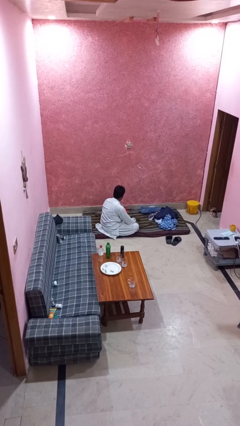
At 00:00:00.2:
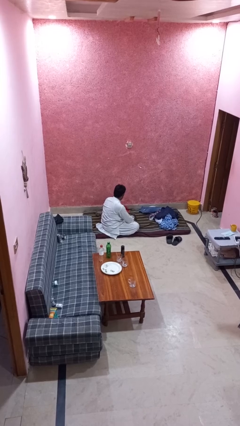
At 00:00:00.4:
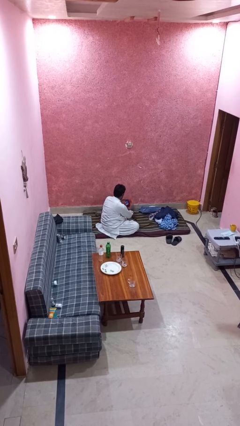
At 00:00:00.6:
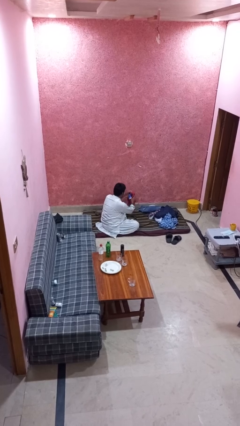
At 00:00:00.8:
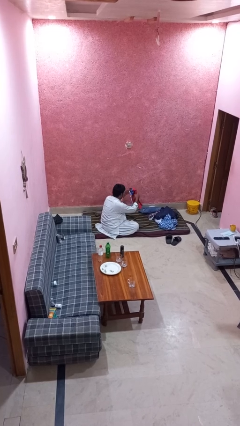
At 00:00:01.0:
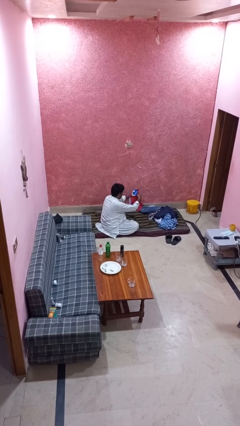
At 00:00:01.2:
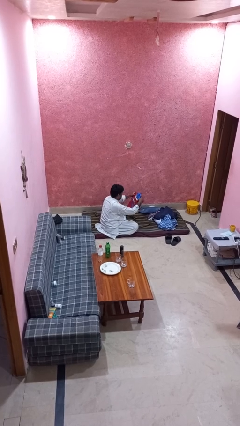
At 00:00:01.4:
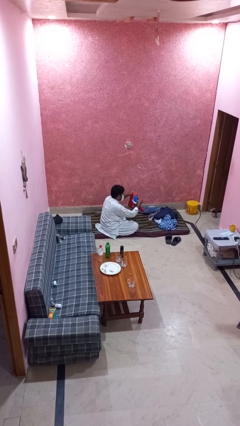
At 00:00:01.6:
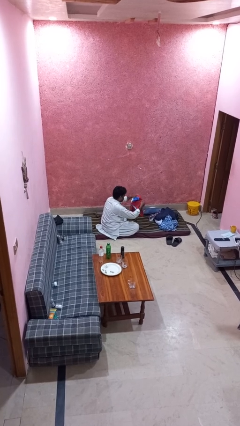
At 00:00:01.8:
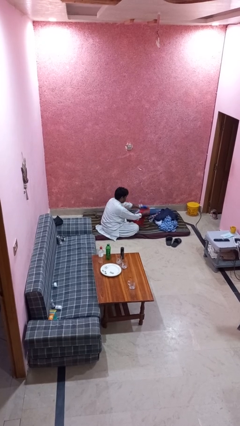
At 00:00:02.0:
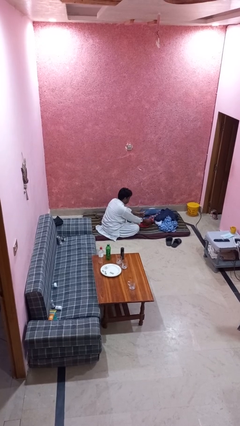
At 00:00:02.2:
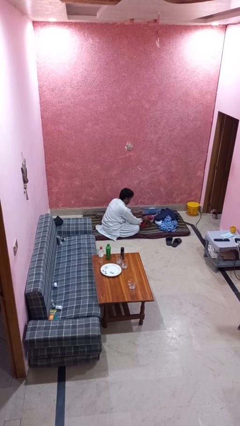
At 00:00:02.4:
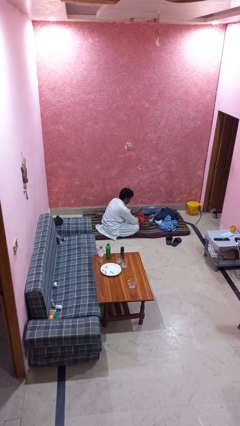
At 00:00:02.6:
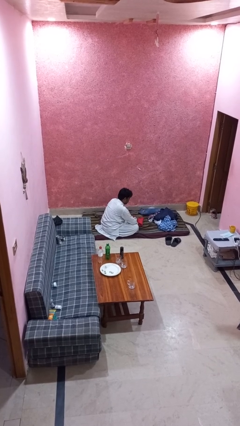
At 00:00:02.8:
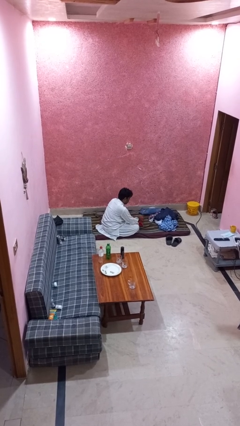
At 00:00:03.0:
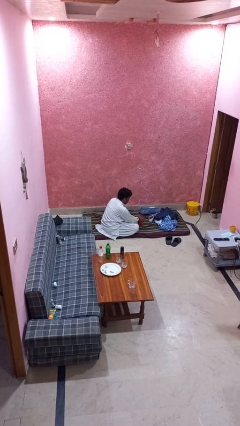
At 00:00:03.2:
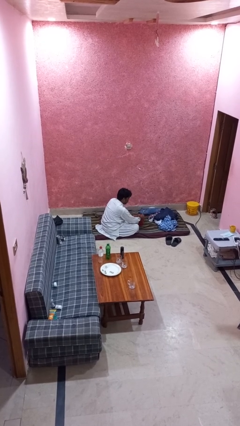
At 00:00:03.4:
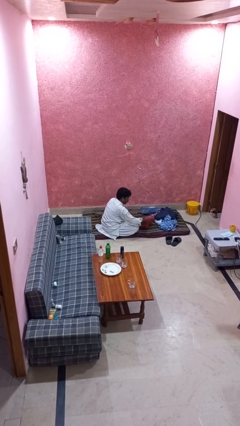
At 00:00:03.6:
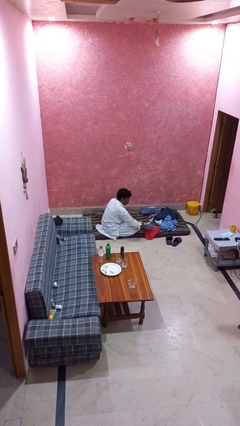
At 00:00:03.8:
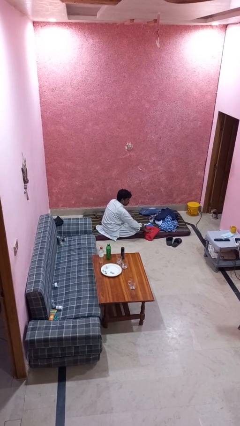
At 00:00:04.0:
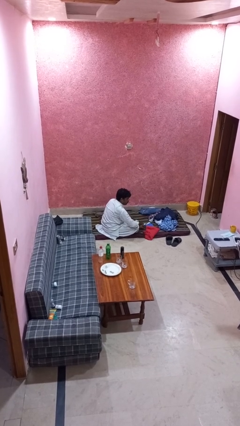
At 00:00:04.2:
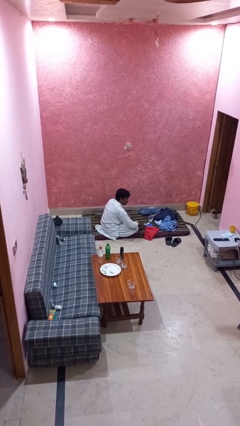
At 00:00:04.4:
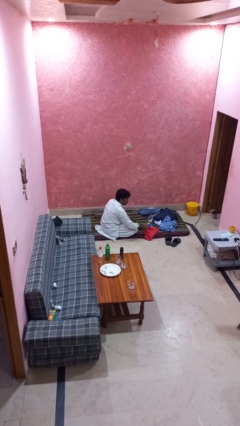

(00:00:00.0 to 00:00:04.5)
person folds shirt

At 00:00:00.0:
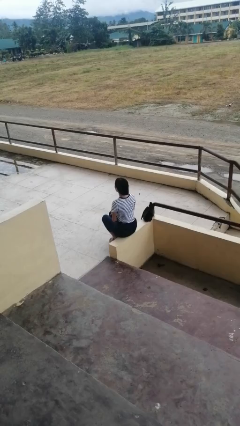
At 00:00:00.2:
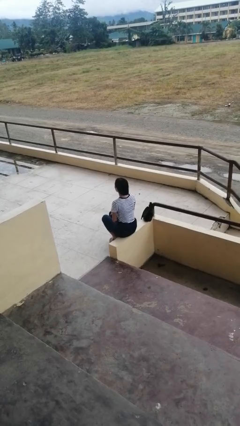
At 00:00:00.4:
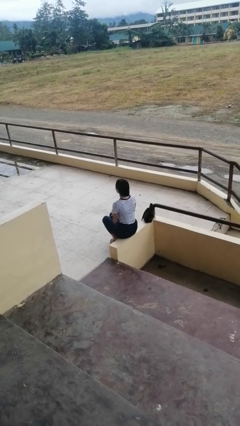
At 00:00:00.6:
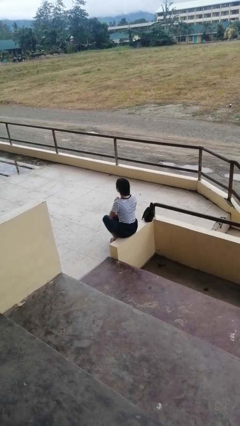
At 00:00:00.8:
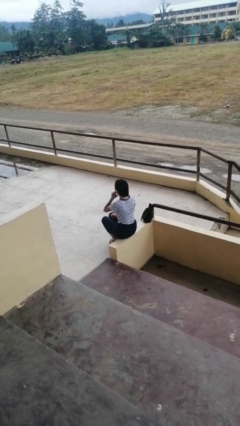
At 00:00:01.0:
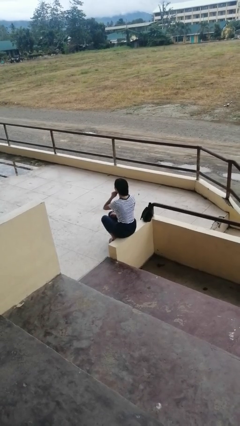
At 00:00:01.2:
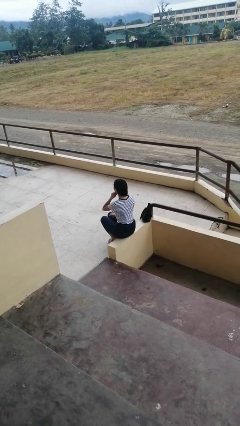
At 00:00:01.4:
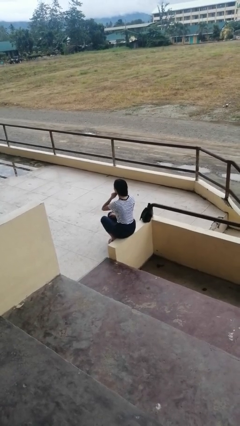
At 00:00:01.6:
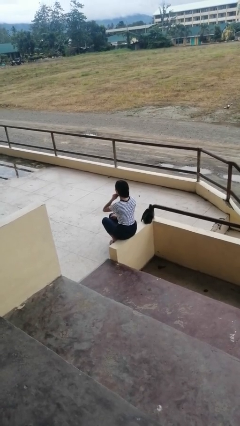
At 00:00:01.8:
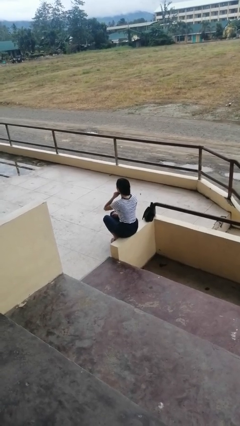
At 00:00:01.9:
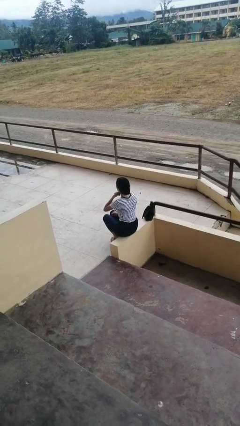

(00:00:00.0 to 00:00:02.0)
person strokes chin

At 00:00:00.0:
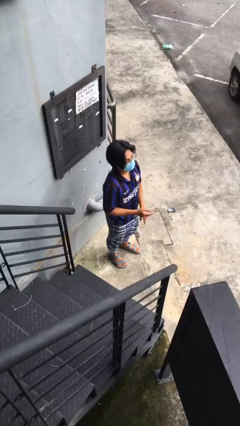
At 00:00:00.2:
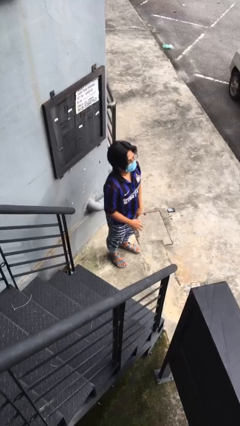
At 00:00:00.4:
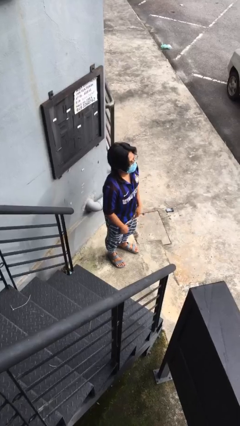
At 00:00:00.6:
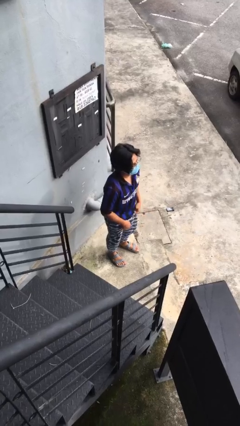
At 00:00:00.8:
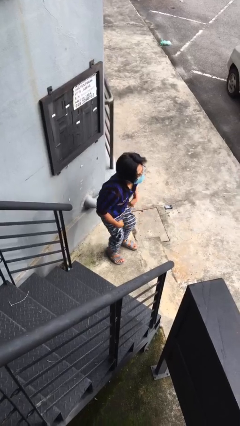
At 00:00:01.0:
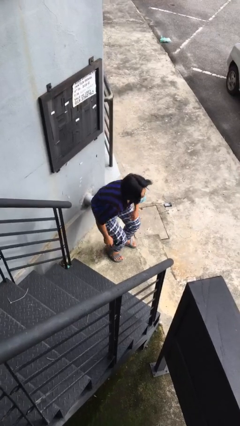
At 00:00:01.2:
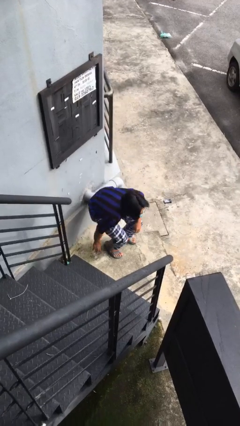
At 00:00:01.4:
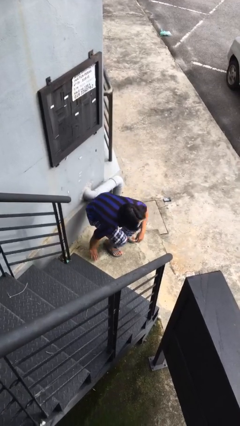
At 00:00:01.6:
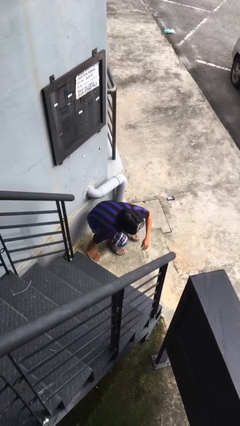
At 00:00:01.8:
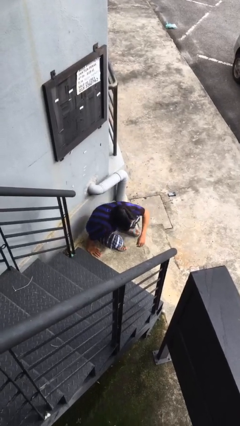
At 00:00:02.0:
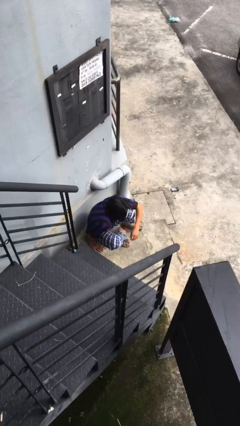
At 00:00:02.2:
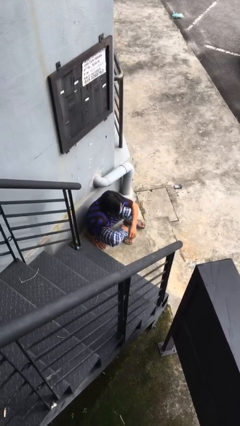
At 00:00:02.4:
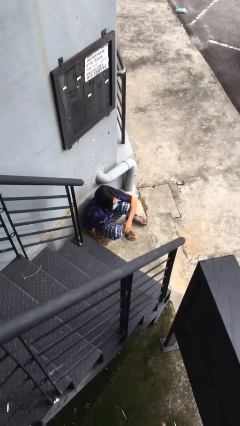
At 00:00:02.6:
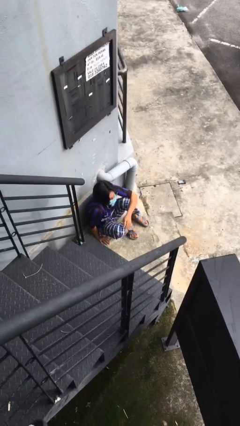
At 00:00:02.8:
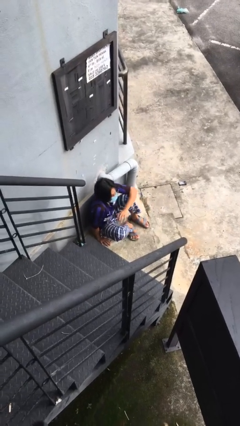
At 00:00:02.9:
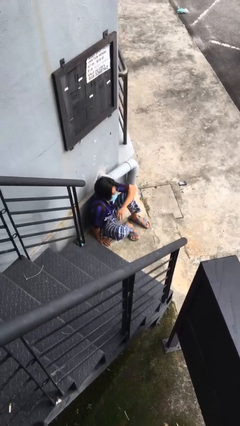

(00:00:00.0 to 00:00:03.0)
person sits down

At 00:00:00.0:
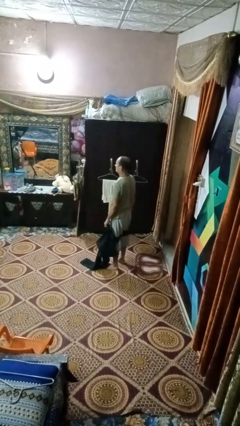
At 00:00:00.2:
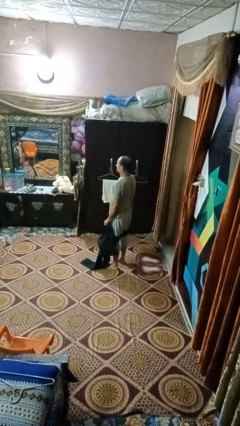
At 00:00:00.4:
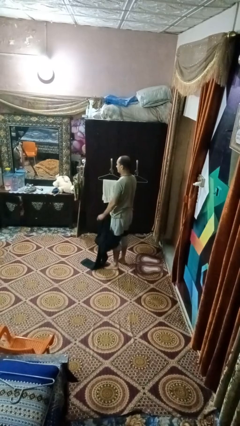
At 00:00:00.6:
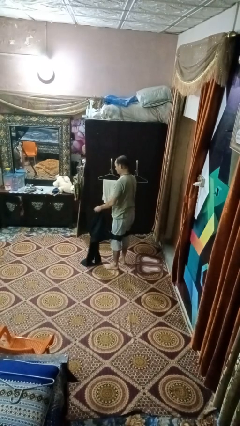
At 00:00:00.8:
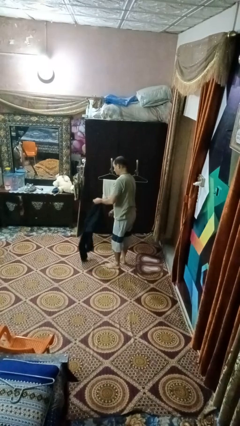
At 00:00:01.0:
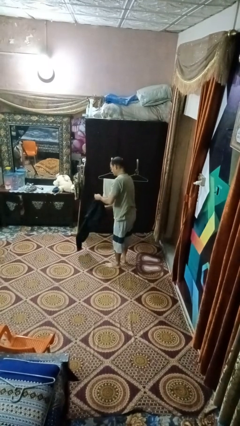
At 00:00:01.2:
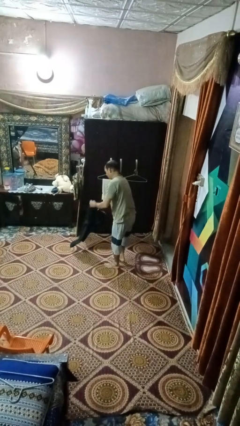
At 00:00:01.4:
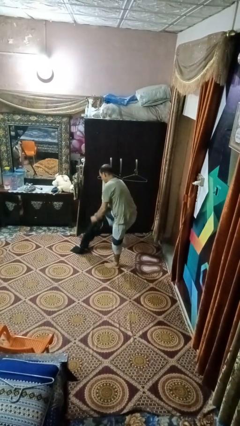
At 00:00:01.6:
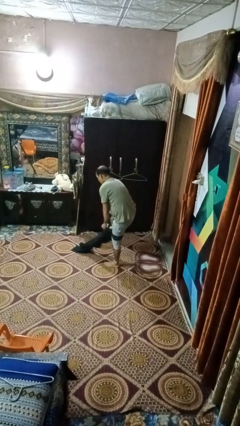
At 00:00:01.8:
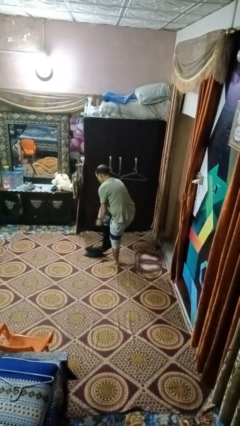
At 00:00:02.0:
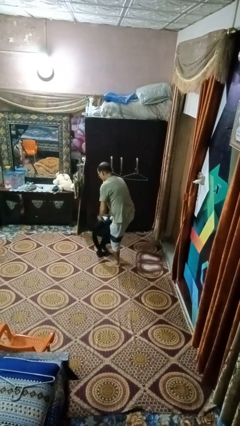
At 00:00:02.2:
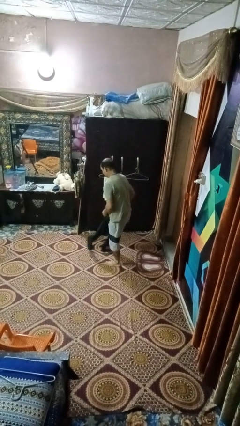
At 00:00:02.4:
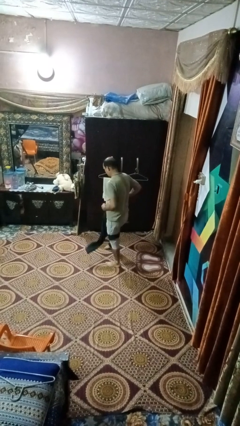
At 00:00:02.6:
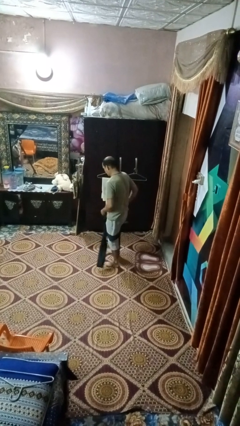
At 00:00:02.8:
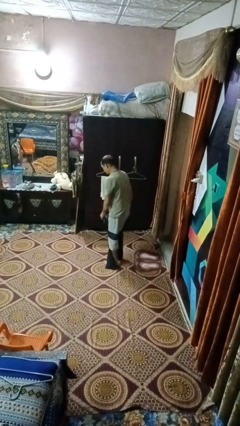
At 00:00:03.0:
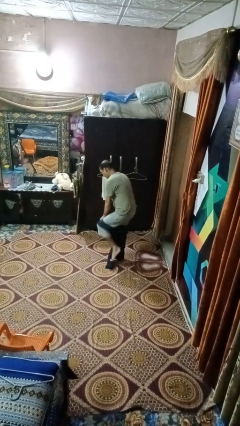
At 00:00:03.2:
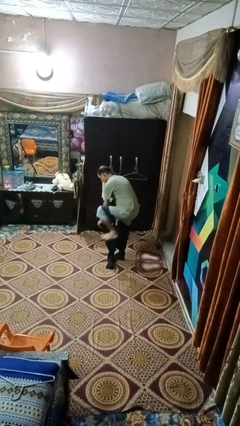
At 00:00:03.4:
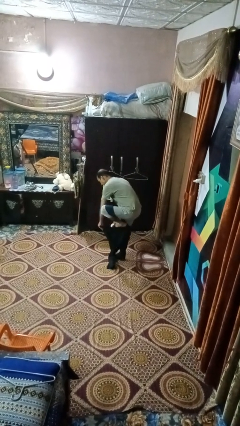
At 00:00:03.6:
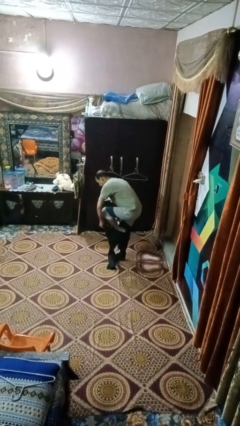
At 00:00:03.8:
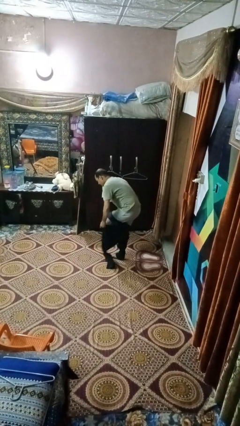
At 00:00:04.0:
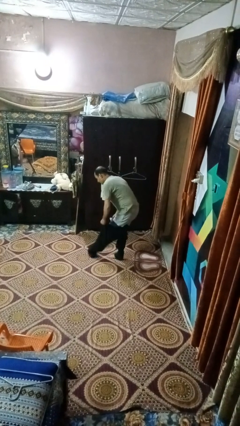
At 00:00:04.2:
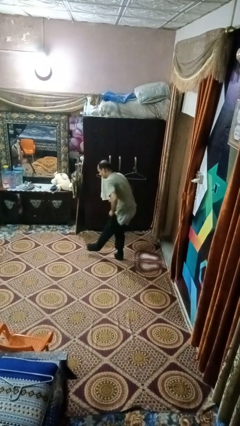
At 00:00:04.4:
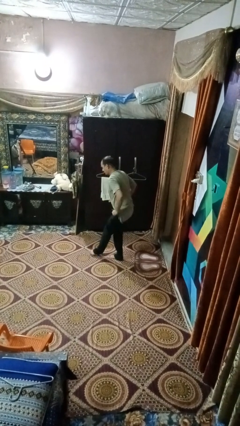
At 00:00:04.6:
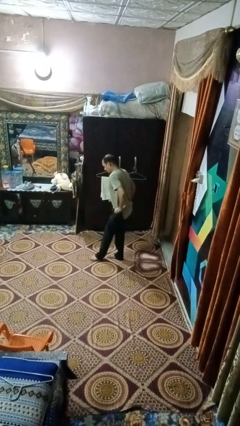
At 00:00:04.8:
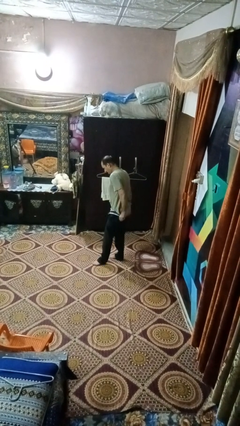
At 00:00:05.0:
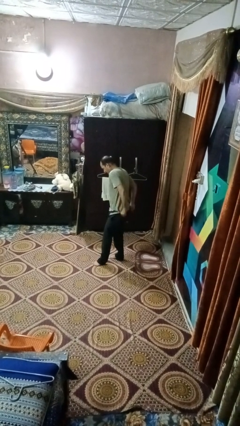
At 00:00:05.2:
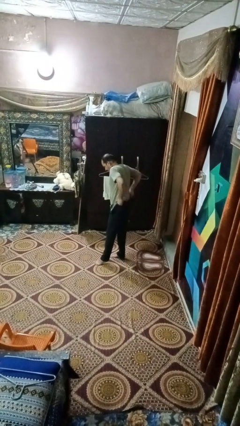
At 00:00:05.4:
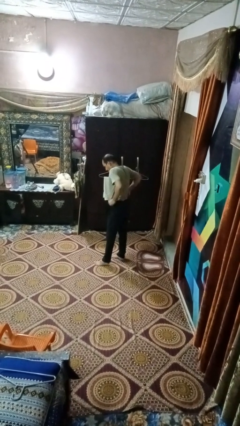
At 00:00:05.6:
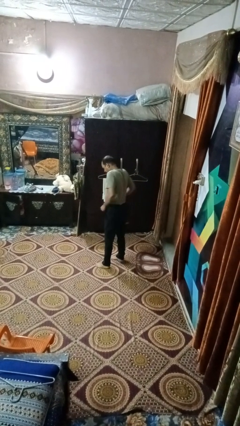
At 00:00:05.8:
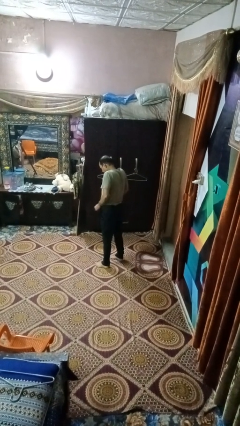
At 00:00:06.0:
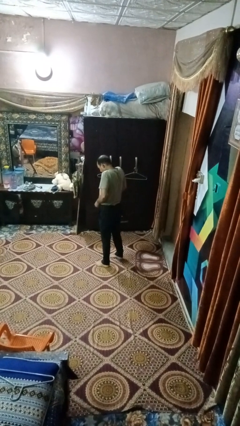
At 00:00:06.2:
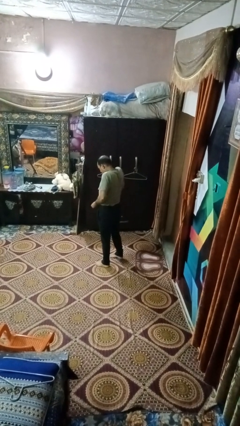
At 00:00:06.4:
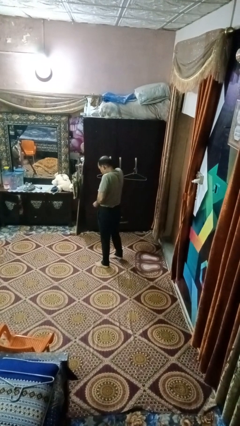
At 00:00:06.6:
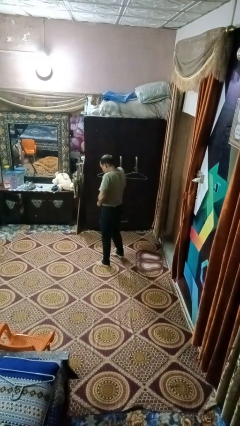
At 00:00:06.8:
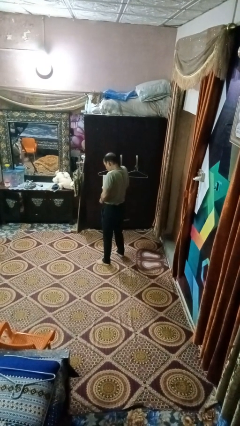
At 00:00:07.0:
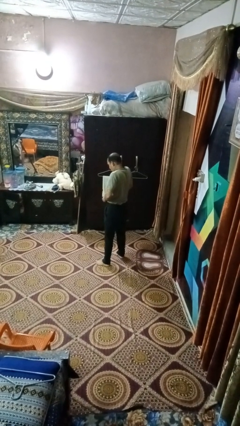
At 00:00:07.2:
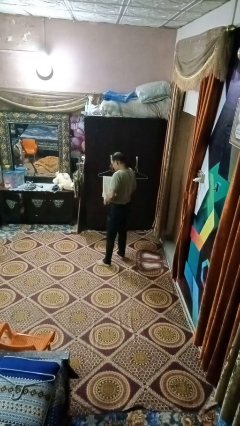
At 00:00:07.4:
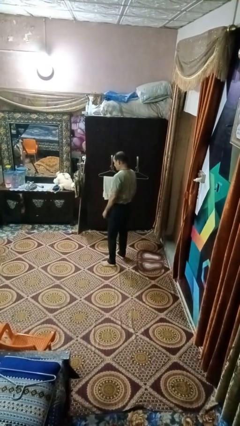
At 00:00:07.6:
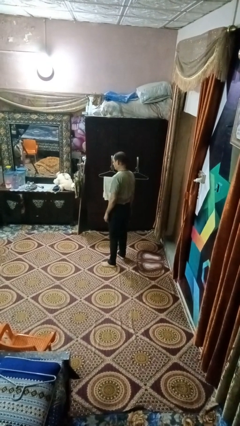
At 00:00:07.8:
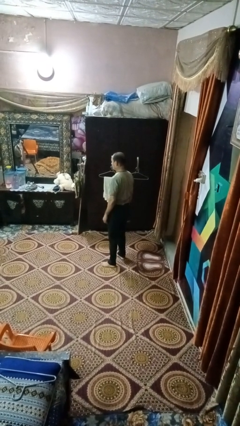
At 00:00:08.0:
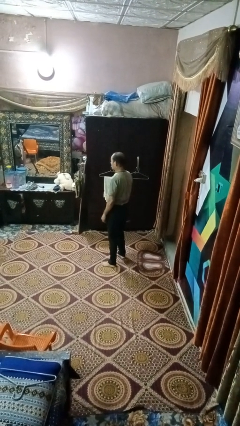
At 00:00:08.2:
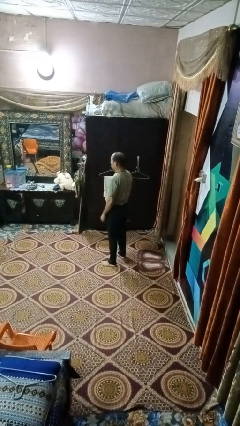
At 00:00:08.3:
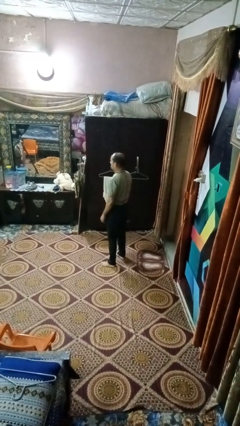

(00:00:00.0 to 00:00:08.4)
person puts on pants
